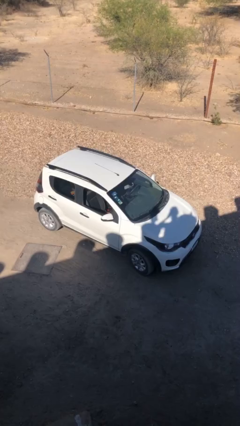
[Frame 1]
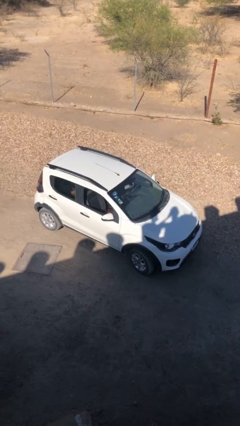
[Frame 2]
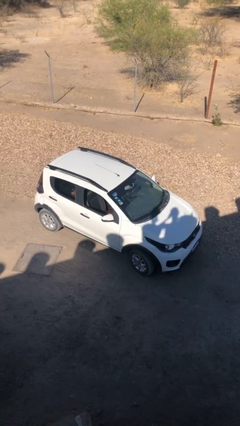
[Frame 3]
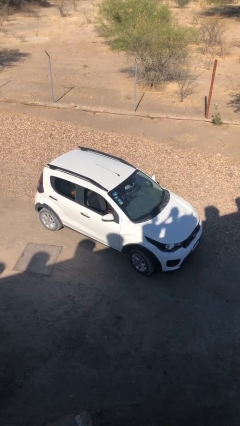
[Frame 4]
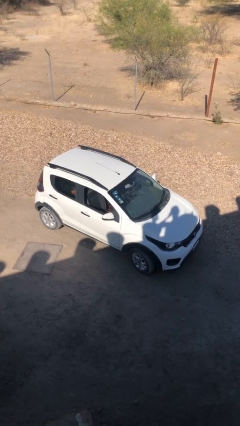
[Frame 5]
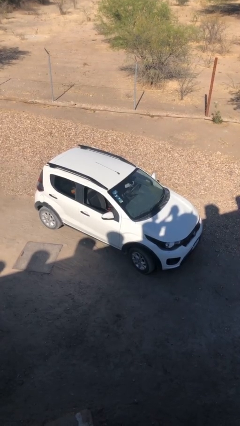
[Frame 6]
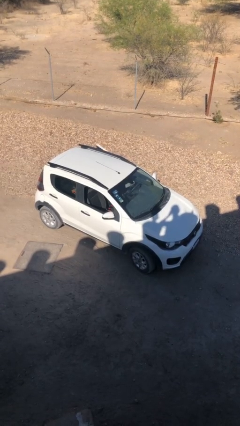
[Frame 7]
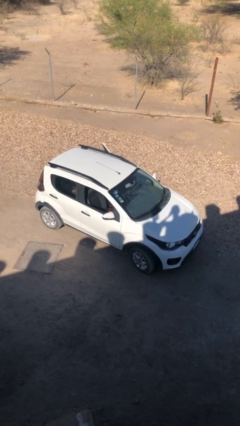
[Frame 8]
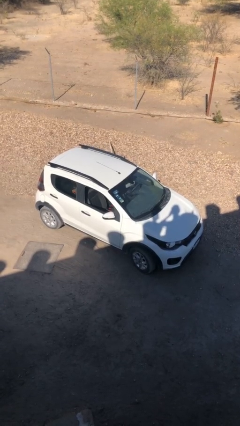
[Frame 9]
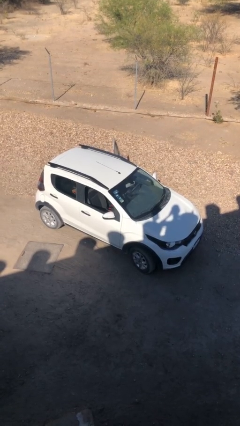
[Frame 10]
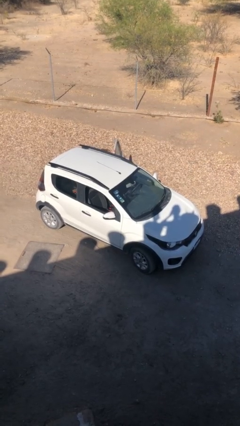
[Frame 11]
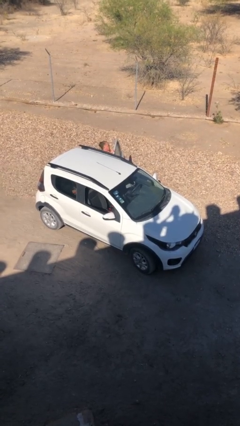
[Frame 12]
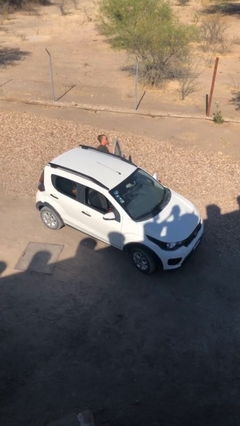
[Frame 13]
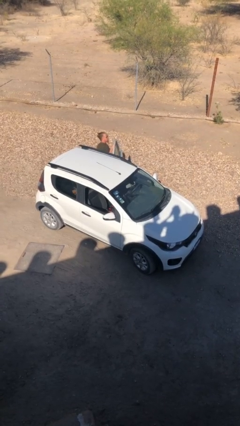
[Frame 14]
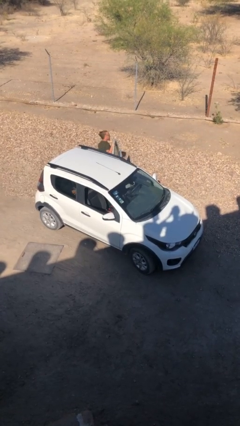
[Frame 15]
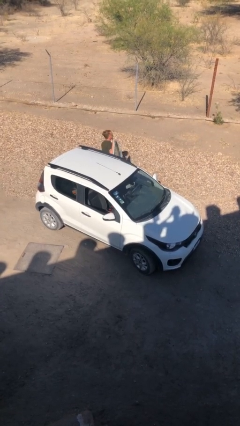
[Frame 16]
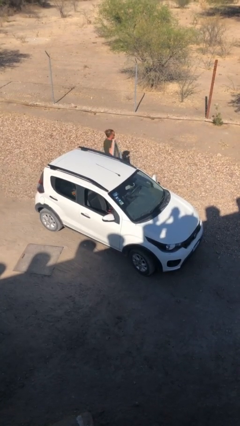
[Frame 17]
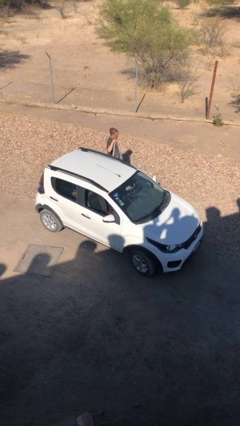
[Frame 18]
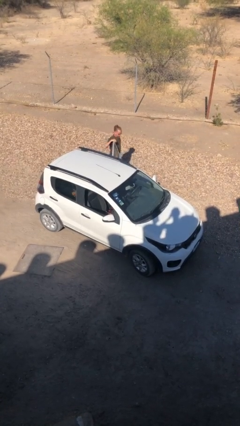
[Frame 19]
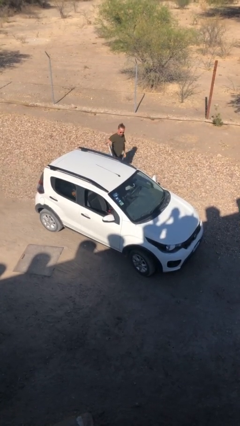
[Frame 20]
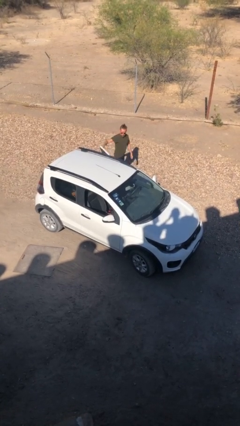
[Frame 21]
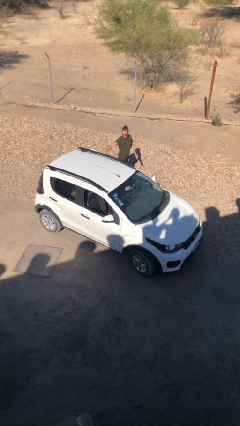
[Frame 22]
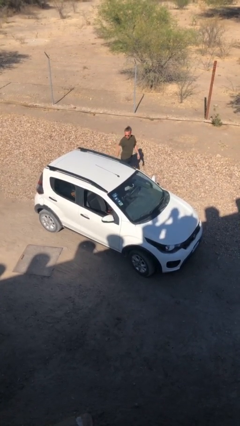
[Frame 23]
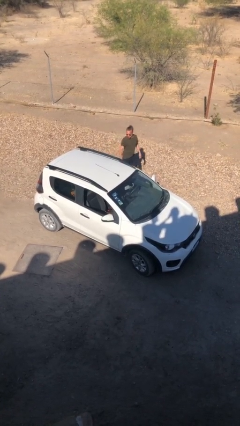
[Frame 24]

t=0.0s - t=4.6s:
car drops off person

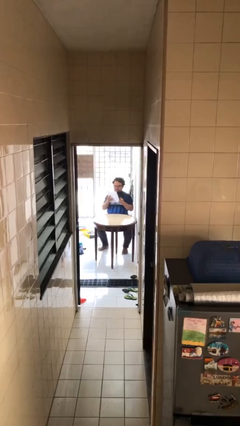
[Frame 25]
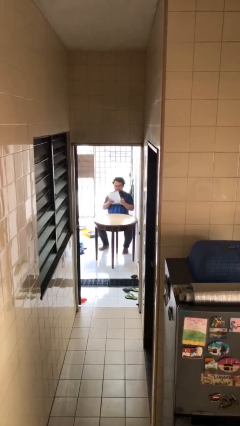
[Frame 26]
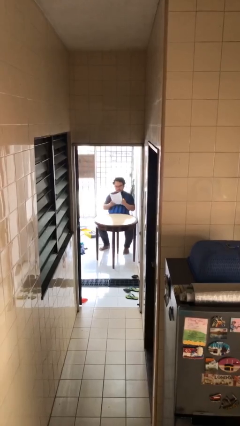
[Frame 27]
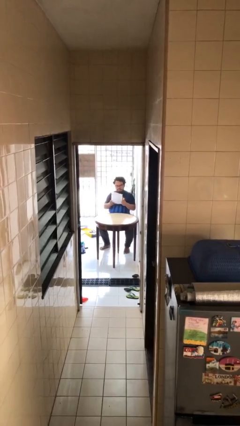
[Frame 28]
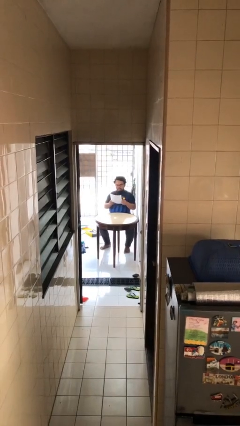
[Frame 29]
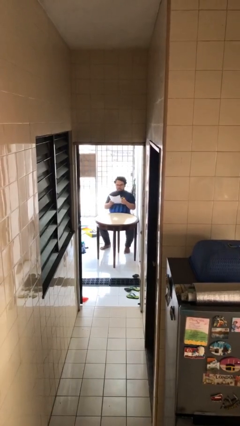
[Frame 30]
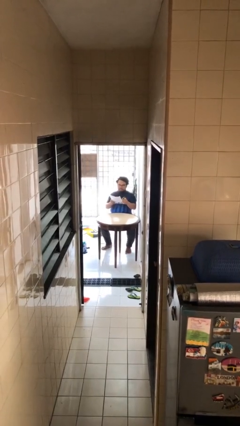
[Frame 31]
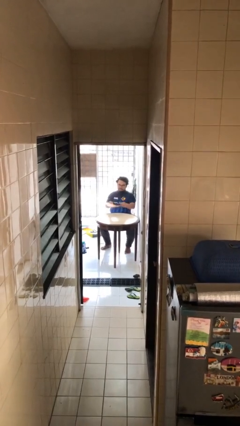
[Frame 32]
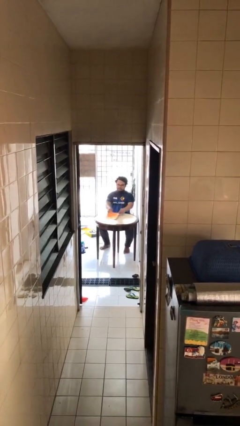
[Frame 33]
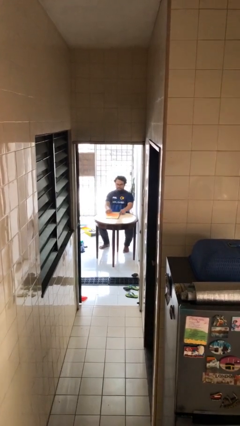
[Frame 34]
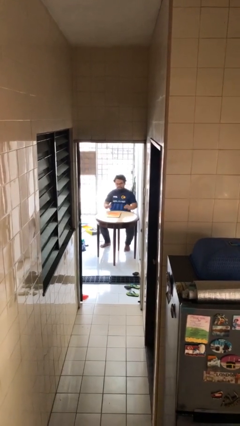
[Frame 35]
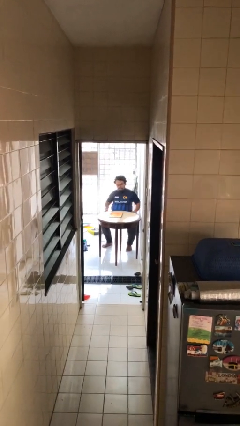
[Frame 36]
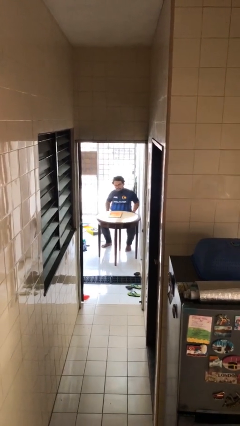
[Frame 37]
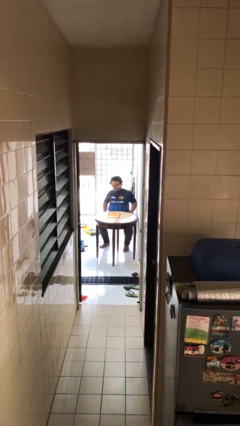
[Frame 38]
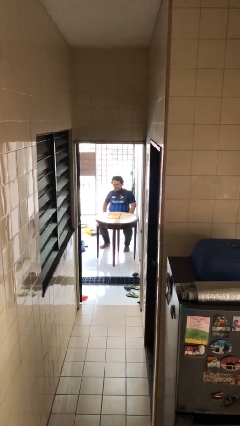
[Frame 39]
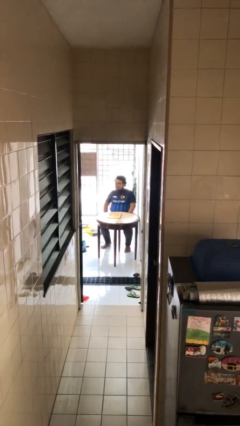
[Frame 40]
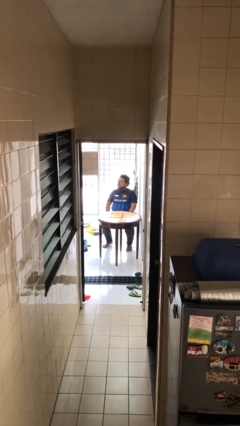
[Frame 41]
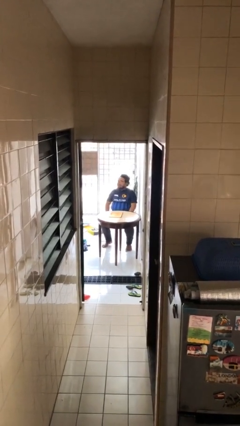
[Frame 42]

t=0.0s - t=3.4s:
person puts down object on table

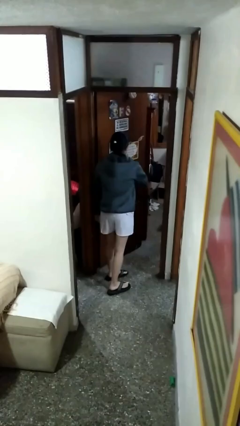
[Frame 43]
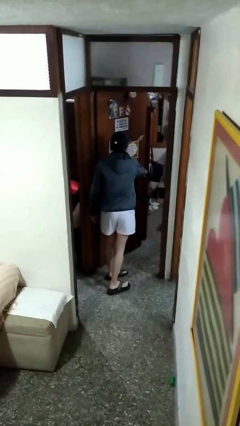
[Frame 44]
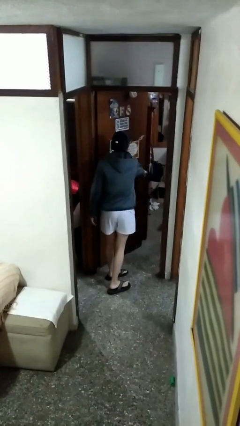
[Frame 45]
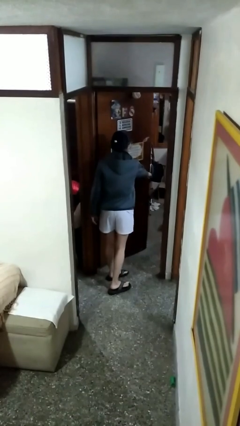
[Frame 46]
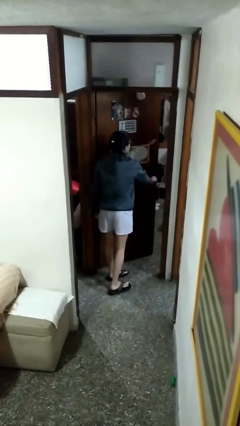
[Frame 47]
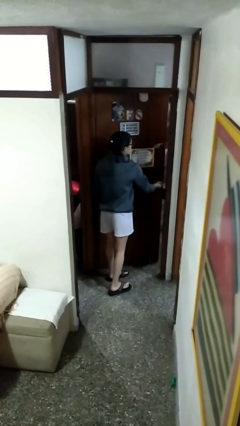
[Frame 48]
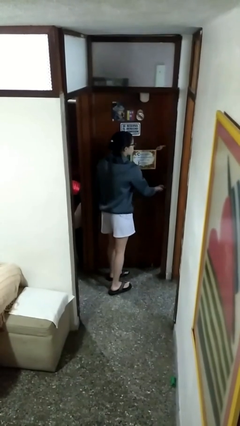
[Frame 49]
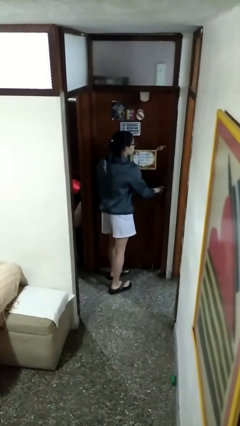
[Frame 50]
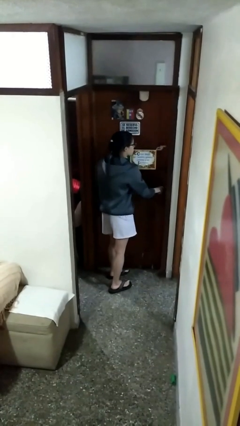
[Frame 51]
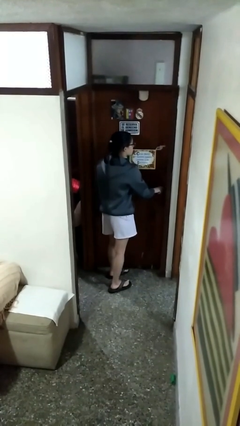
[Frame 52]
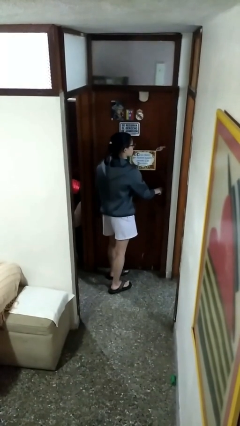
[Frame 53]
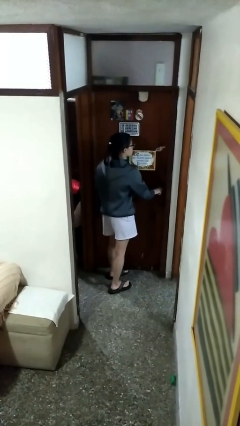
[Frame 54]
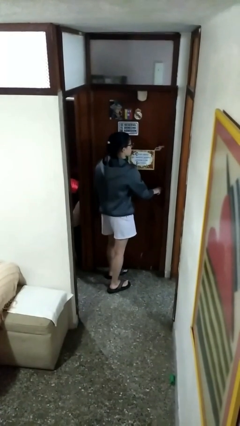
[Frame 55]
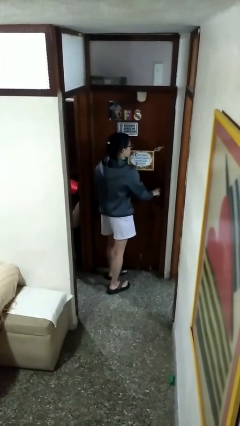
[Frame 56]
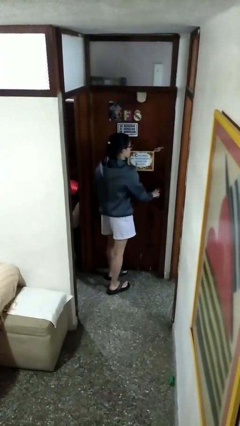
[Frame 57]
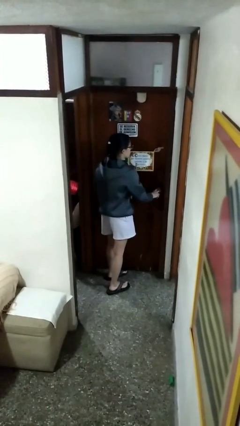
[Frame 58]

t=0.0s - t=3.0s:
person closes facility door

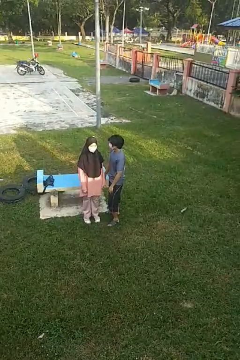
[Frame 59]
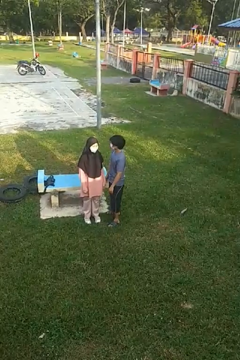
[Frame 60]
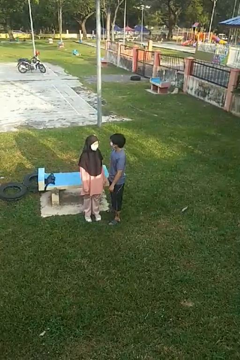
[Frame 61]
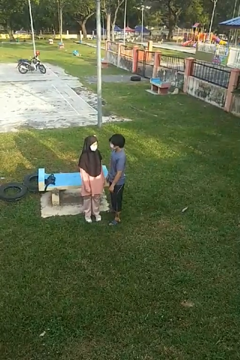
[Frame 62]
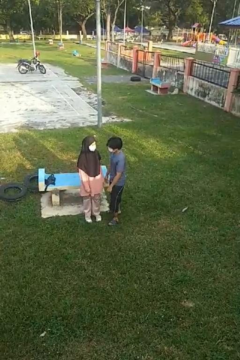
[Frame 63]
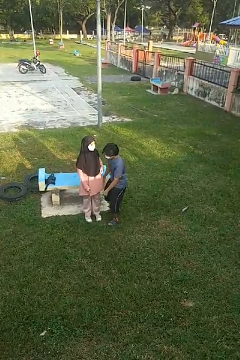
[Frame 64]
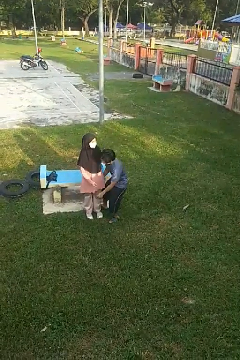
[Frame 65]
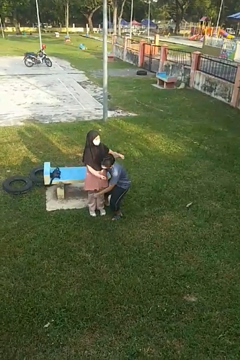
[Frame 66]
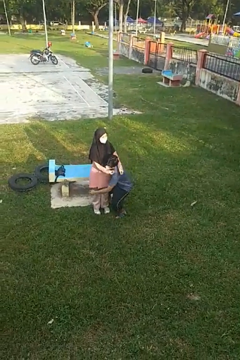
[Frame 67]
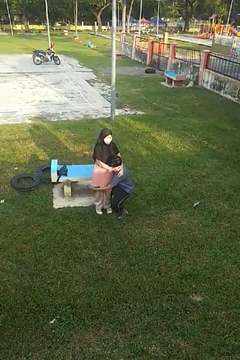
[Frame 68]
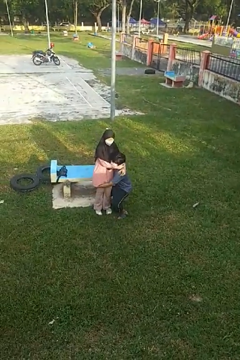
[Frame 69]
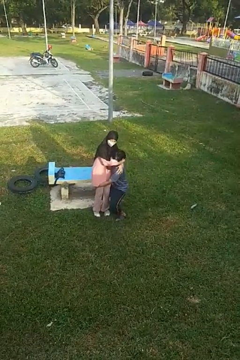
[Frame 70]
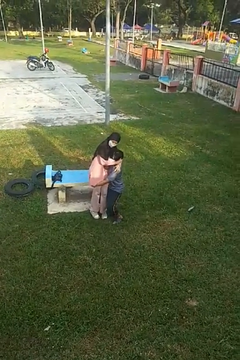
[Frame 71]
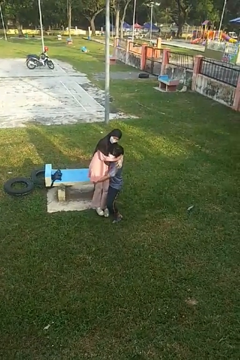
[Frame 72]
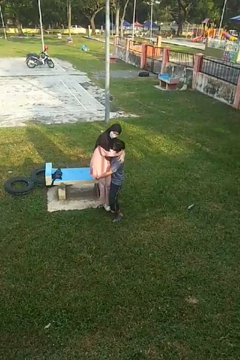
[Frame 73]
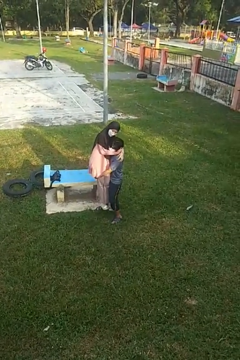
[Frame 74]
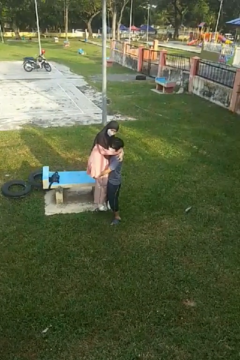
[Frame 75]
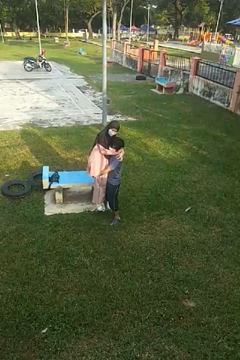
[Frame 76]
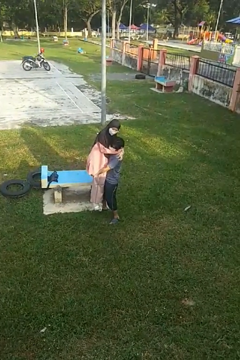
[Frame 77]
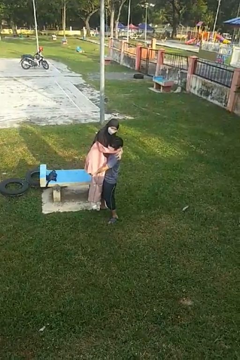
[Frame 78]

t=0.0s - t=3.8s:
person picks up person

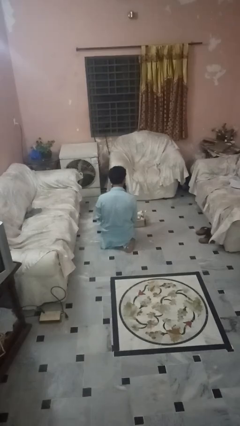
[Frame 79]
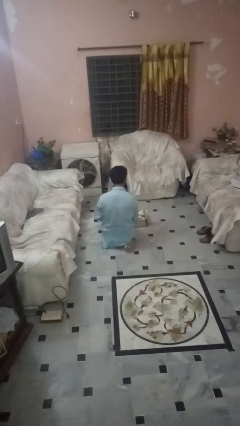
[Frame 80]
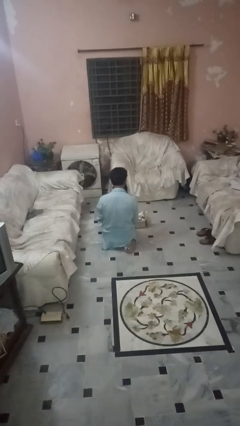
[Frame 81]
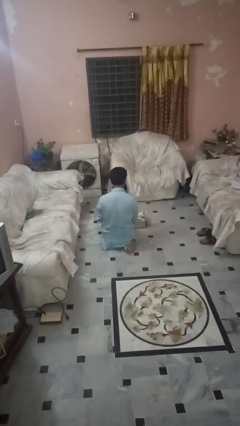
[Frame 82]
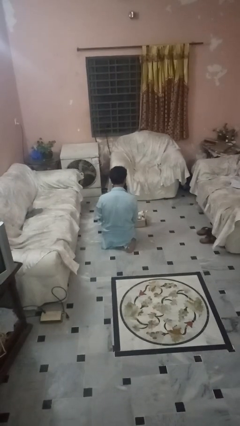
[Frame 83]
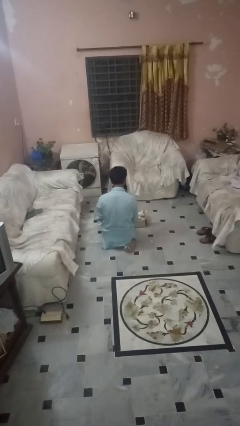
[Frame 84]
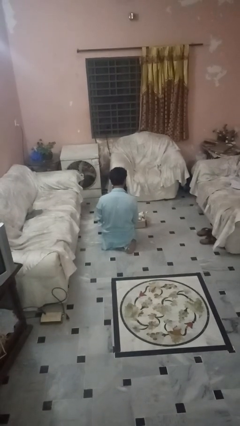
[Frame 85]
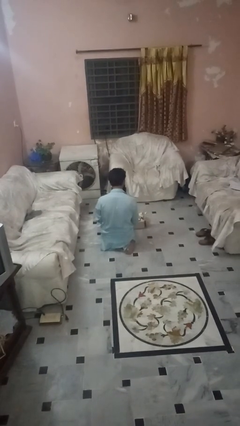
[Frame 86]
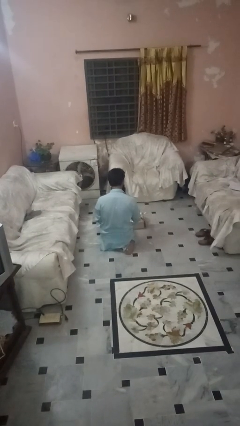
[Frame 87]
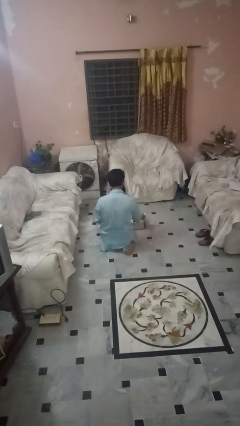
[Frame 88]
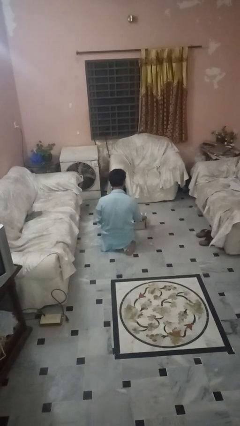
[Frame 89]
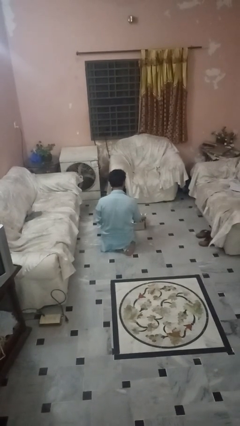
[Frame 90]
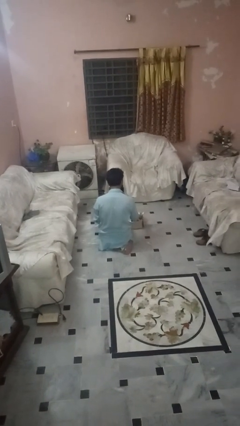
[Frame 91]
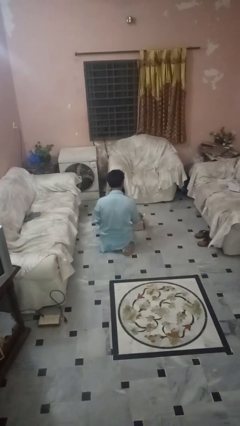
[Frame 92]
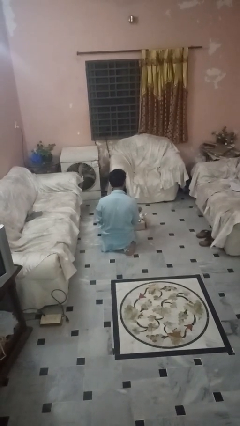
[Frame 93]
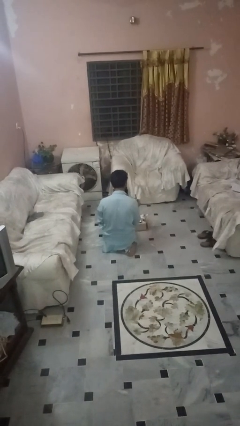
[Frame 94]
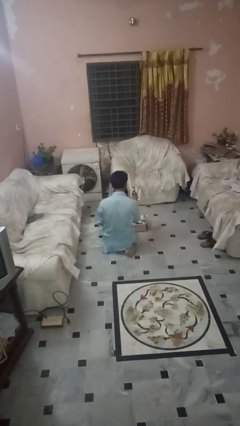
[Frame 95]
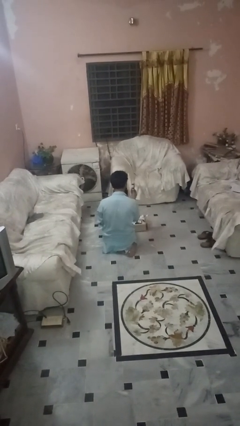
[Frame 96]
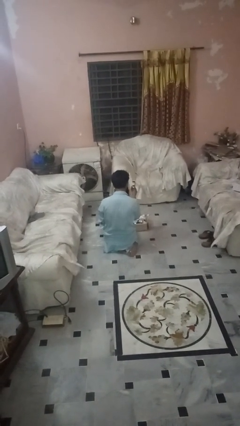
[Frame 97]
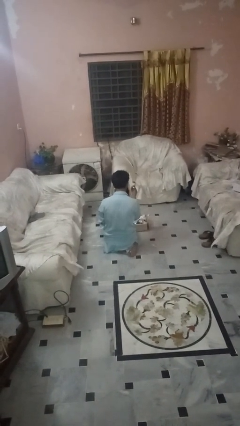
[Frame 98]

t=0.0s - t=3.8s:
person takes object from box
